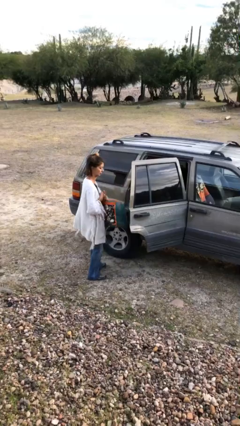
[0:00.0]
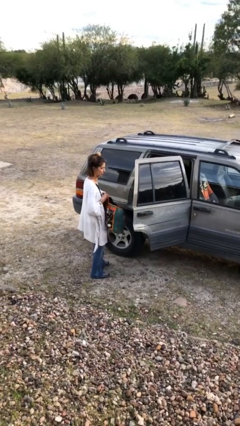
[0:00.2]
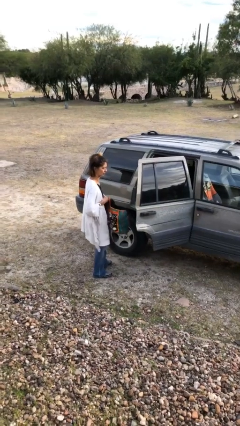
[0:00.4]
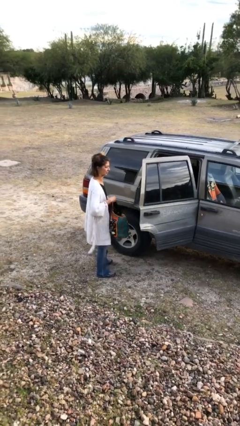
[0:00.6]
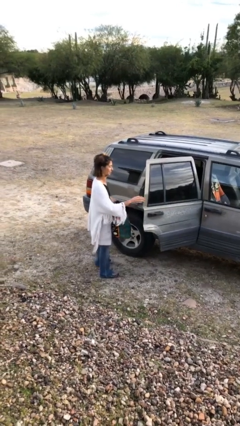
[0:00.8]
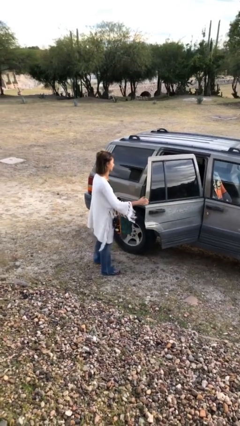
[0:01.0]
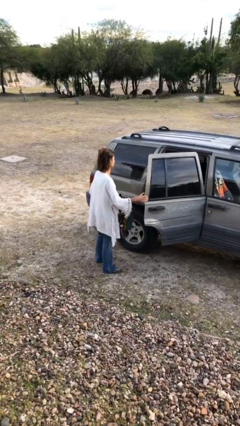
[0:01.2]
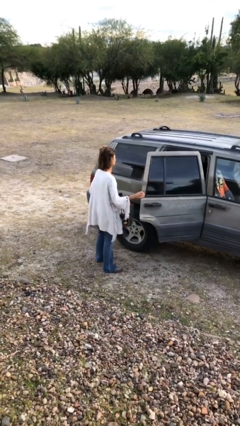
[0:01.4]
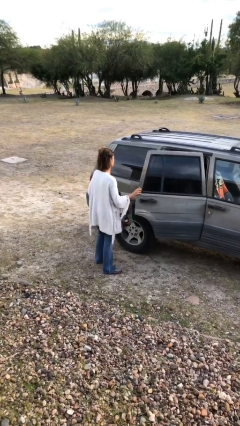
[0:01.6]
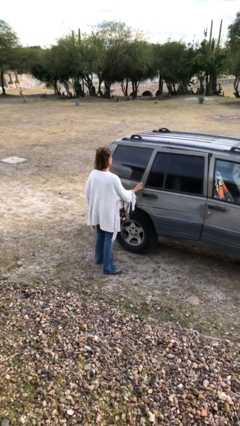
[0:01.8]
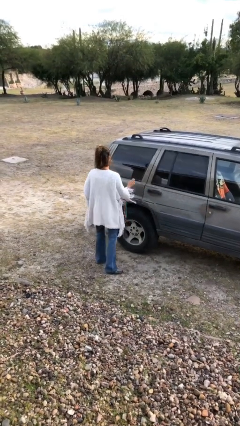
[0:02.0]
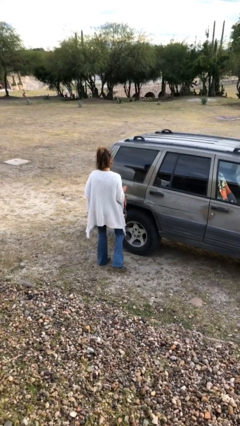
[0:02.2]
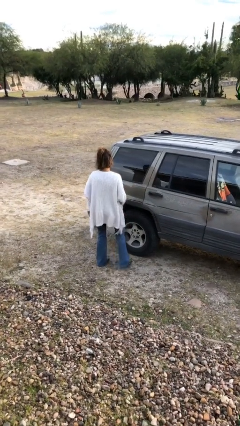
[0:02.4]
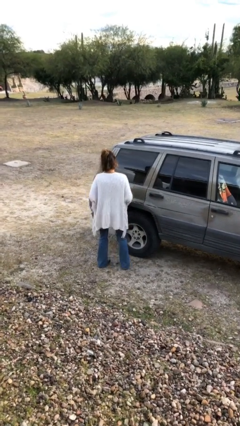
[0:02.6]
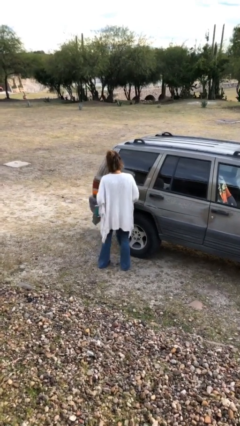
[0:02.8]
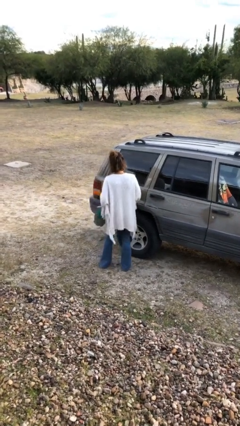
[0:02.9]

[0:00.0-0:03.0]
person closes car door

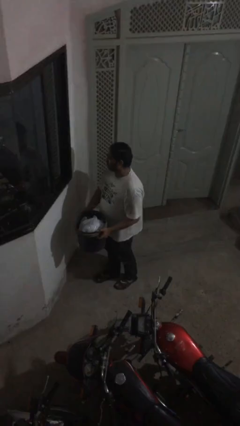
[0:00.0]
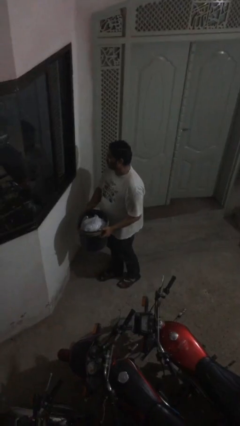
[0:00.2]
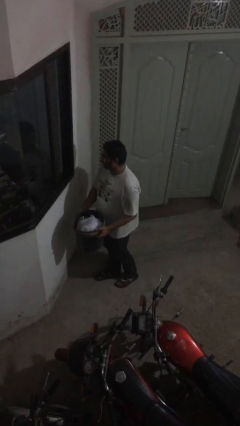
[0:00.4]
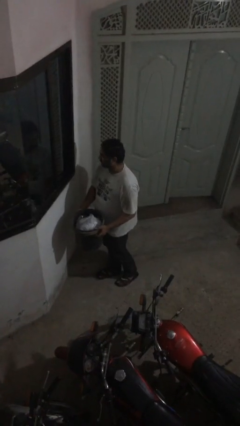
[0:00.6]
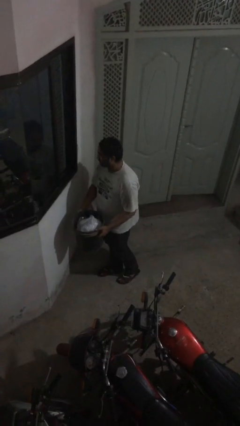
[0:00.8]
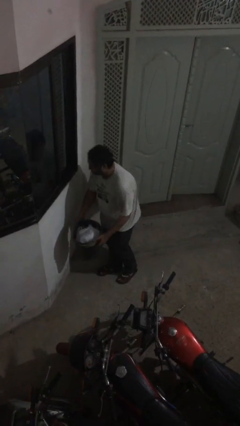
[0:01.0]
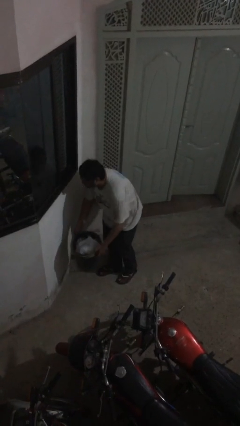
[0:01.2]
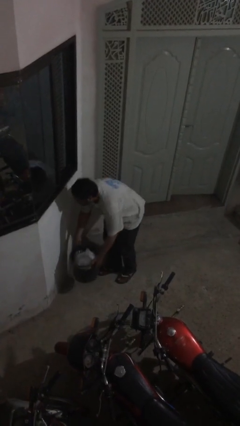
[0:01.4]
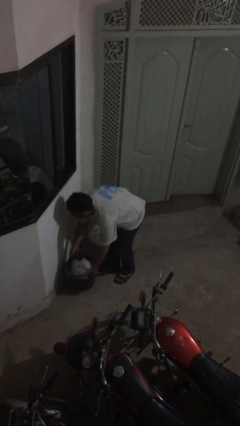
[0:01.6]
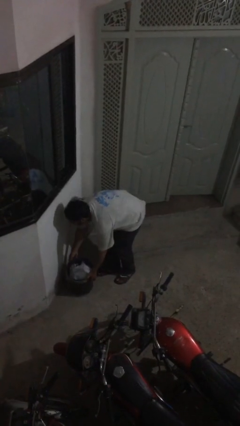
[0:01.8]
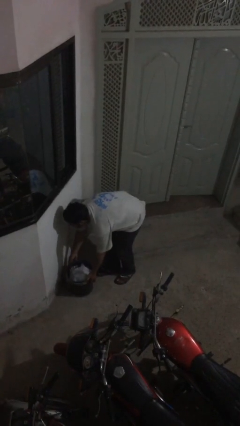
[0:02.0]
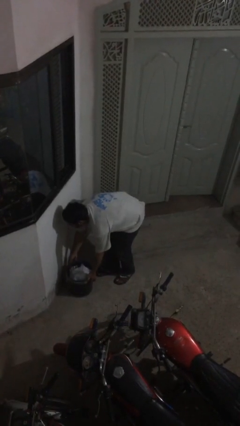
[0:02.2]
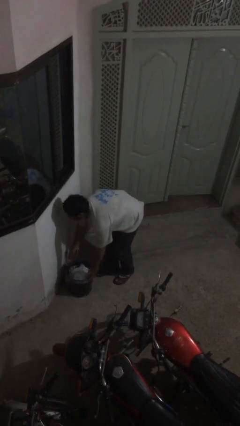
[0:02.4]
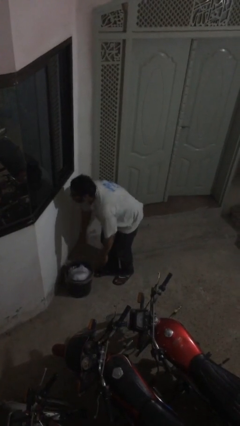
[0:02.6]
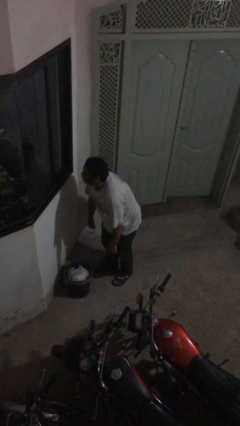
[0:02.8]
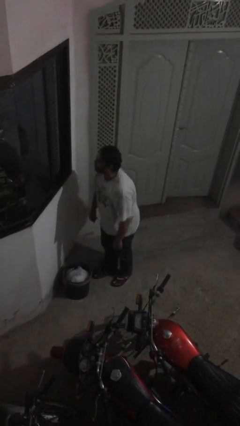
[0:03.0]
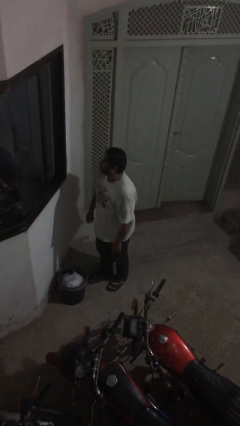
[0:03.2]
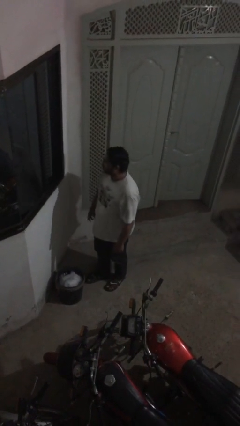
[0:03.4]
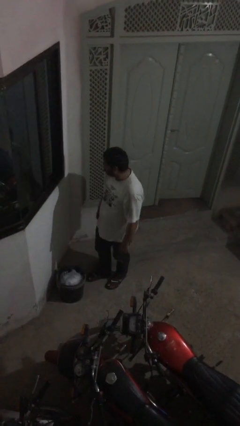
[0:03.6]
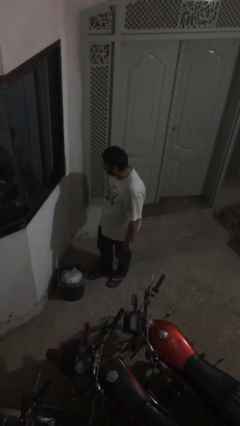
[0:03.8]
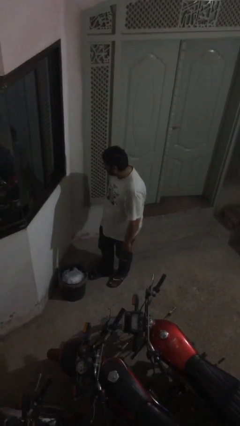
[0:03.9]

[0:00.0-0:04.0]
person puts down object on floor

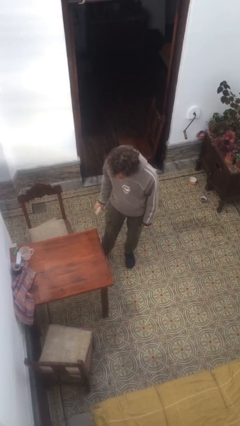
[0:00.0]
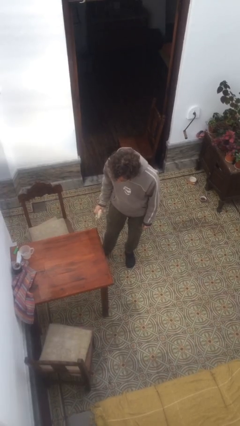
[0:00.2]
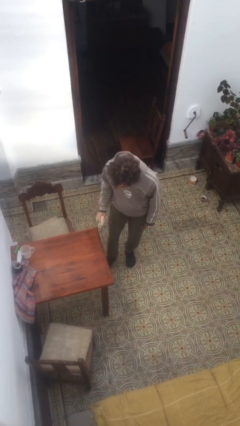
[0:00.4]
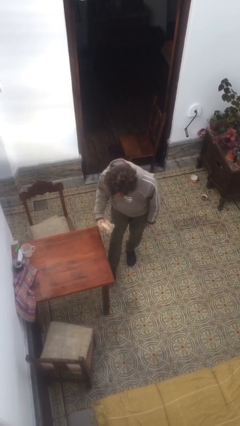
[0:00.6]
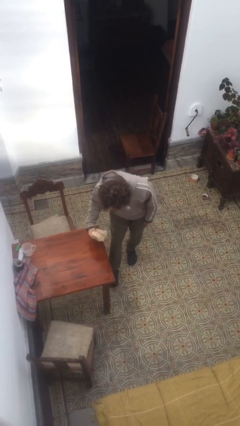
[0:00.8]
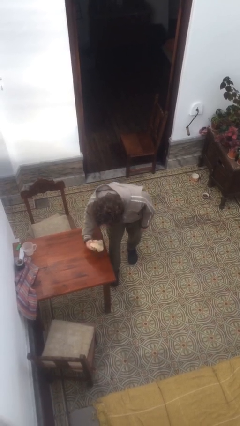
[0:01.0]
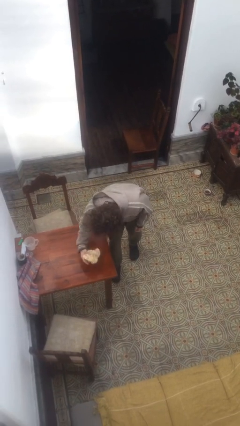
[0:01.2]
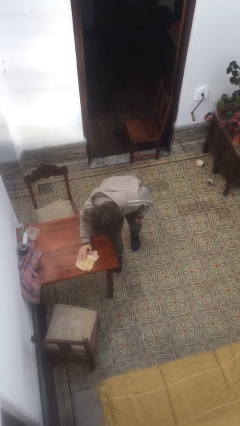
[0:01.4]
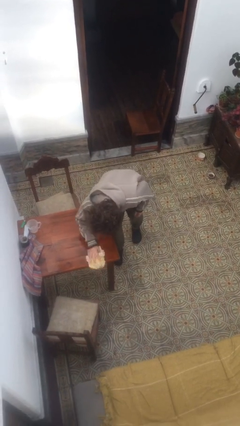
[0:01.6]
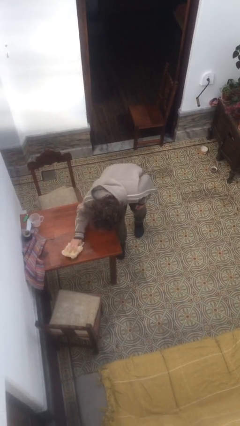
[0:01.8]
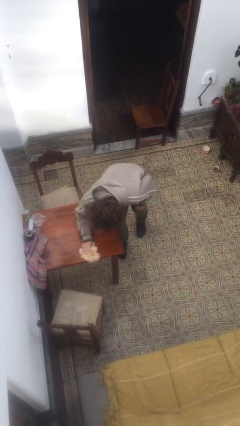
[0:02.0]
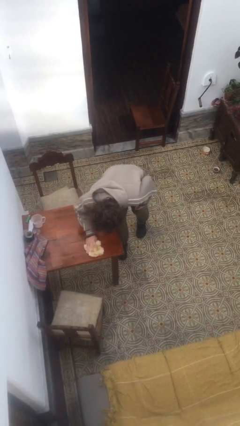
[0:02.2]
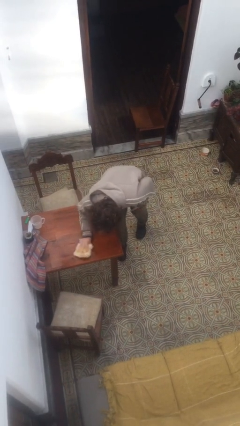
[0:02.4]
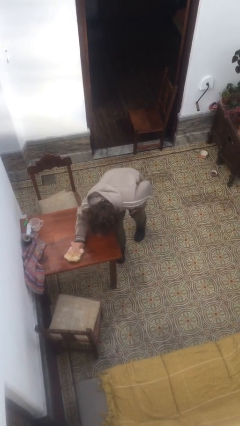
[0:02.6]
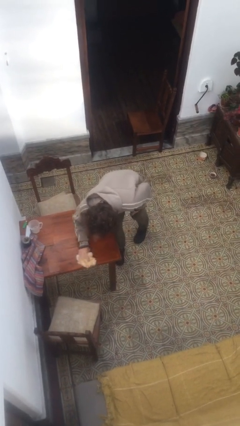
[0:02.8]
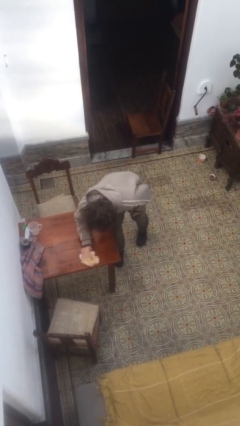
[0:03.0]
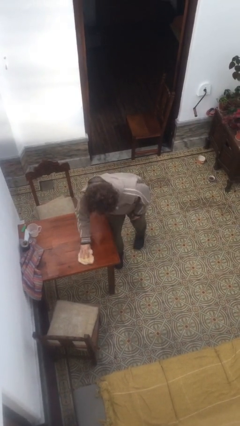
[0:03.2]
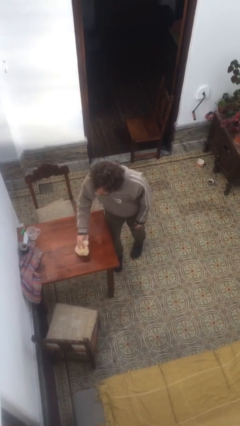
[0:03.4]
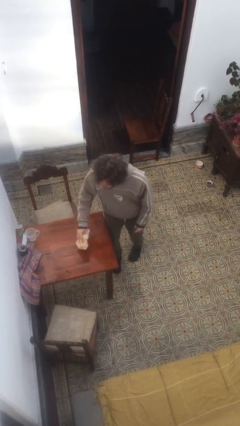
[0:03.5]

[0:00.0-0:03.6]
person cleans table with rag

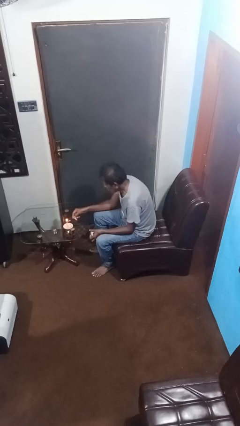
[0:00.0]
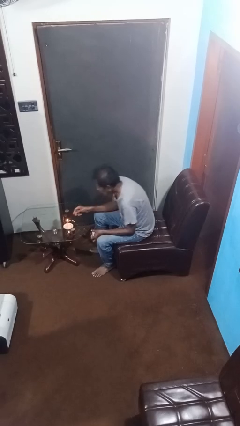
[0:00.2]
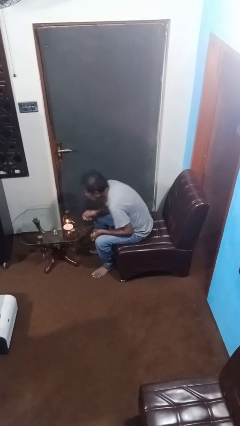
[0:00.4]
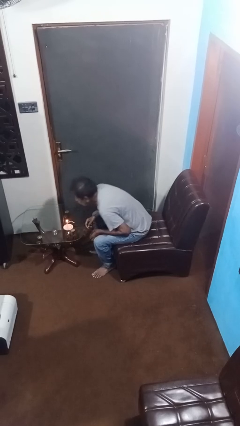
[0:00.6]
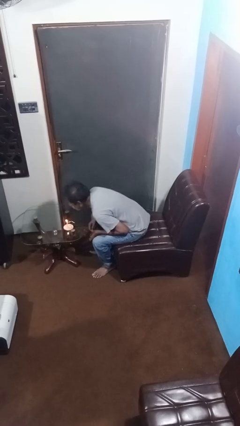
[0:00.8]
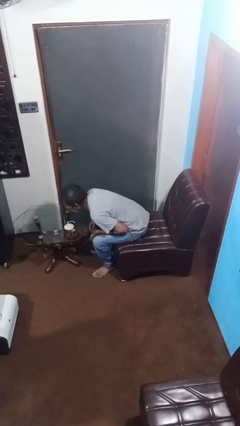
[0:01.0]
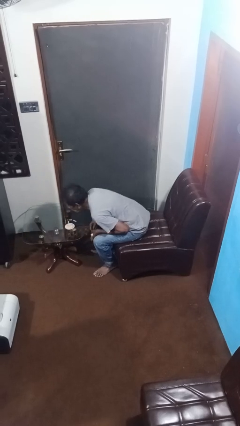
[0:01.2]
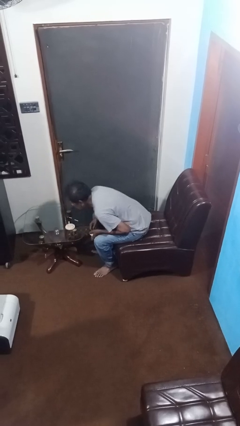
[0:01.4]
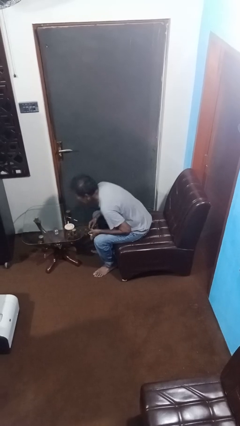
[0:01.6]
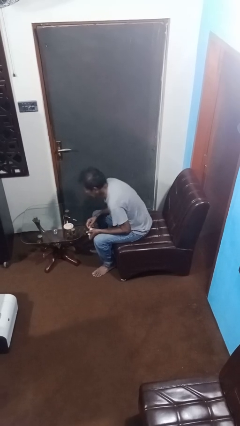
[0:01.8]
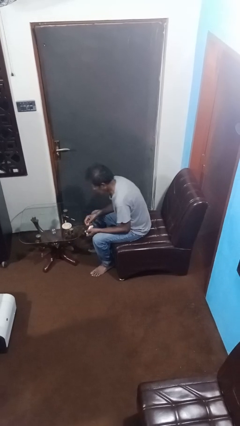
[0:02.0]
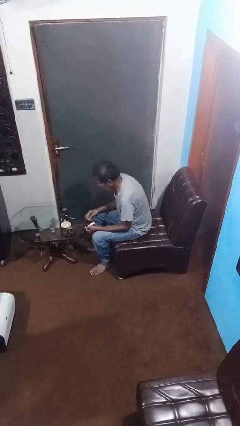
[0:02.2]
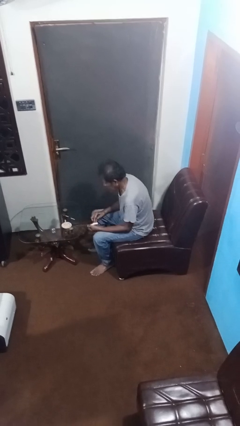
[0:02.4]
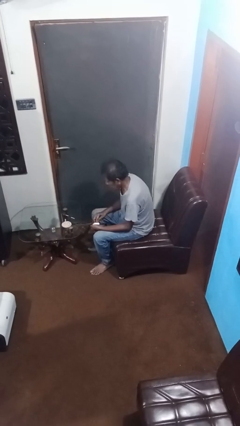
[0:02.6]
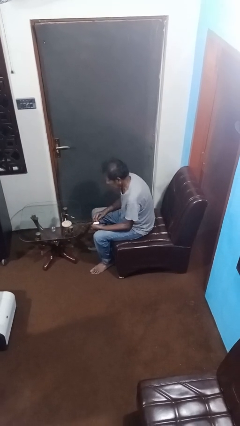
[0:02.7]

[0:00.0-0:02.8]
person extinguishes candle

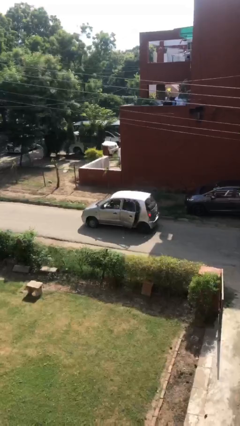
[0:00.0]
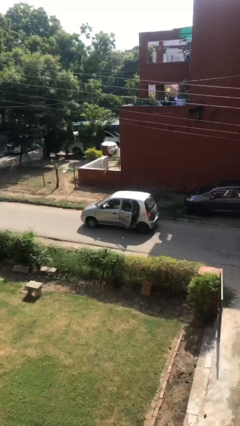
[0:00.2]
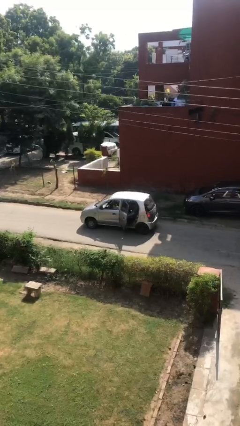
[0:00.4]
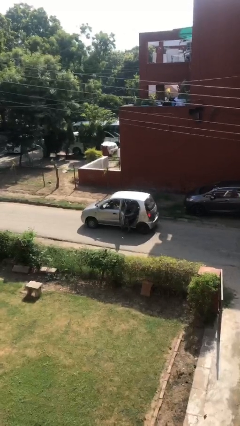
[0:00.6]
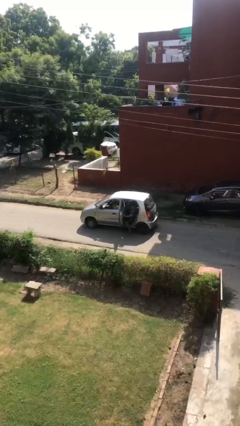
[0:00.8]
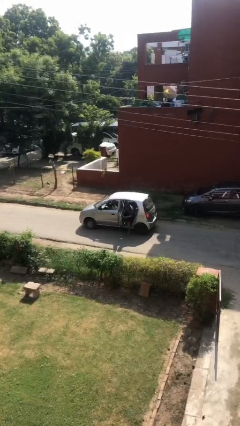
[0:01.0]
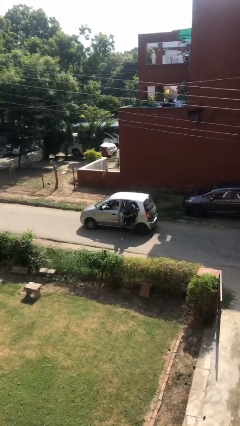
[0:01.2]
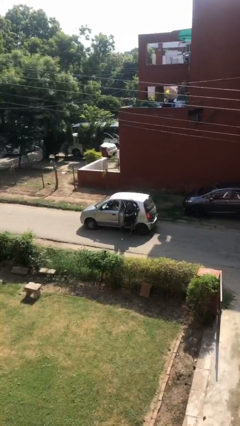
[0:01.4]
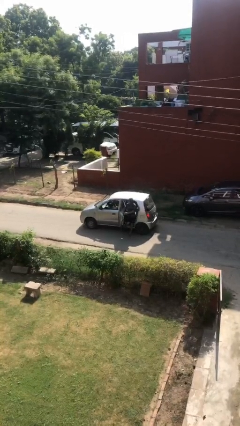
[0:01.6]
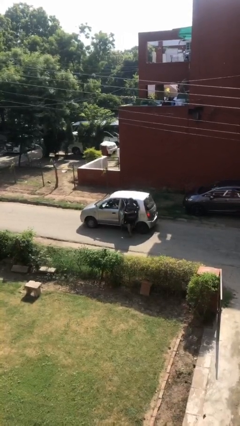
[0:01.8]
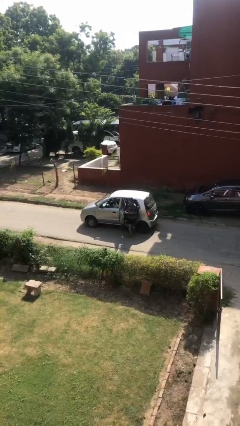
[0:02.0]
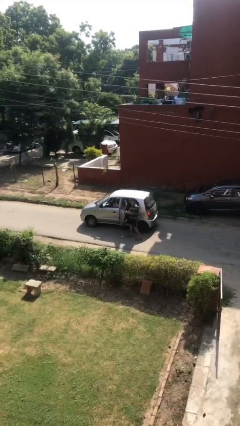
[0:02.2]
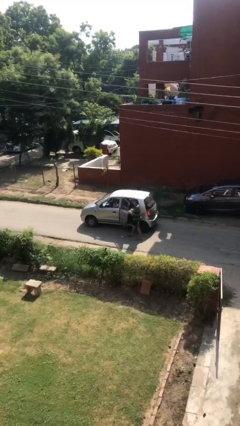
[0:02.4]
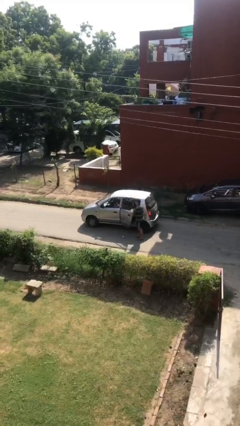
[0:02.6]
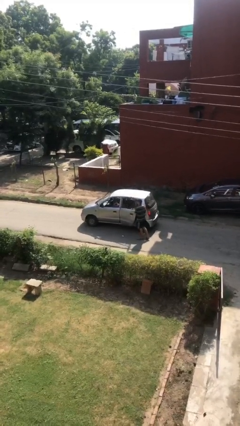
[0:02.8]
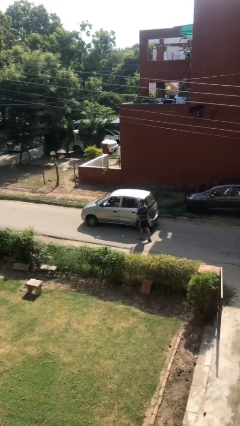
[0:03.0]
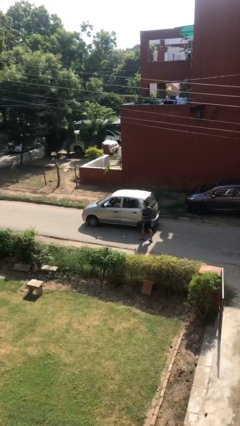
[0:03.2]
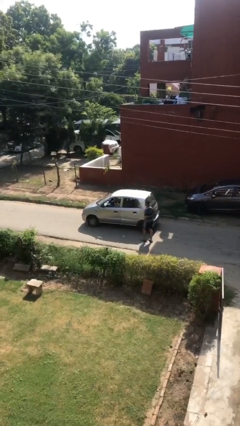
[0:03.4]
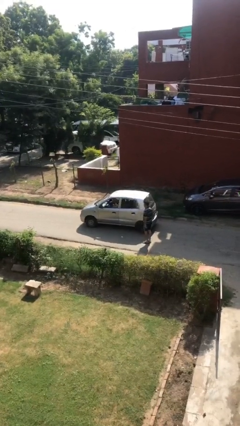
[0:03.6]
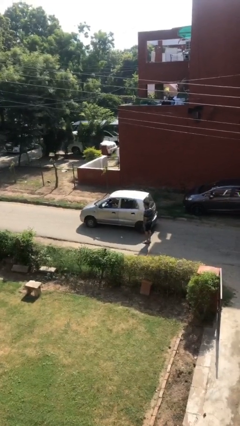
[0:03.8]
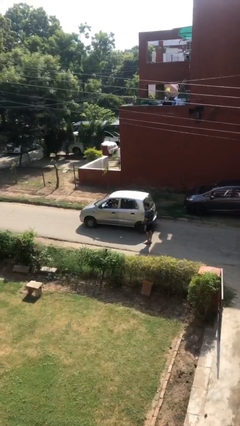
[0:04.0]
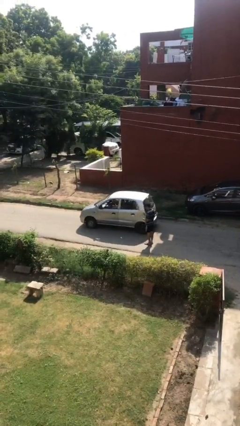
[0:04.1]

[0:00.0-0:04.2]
car drops off person
